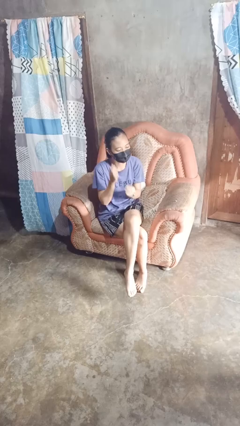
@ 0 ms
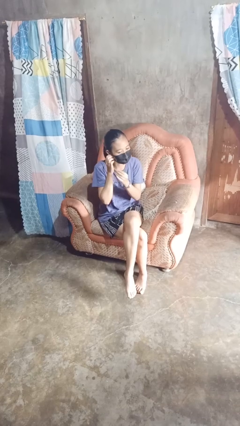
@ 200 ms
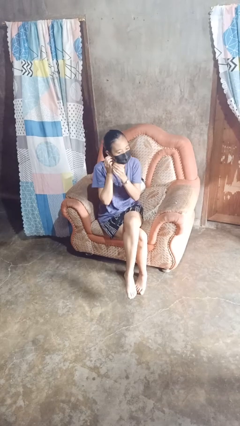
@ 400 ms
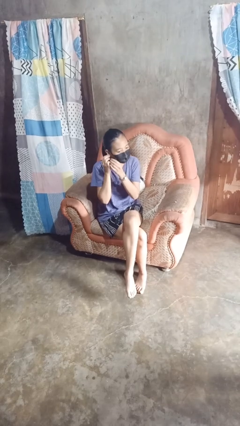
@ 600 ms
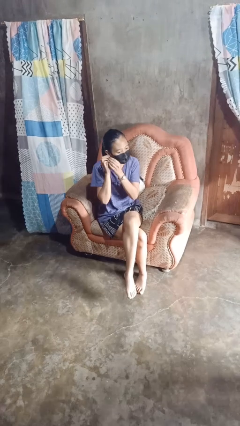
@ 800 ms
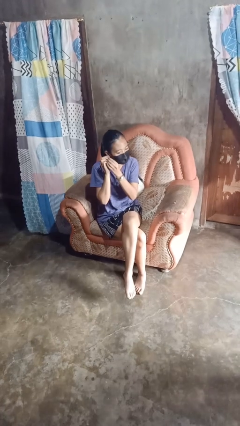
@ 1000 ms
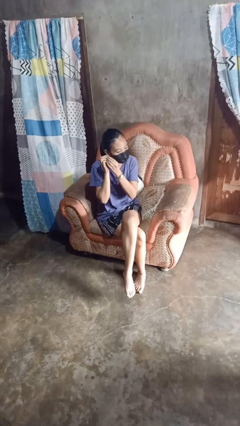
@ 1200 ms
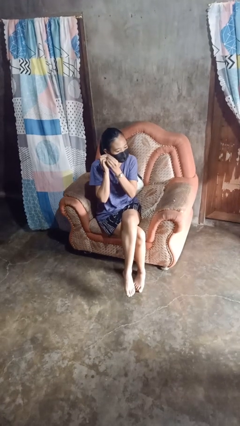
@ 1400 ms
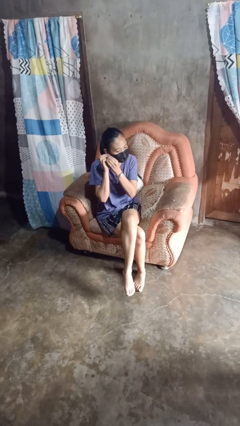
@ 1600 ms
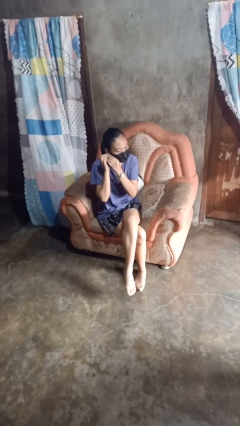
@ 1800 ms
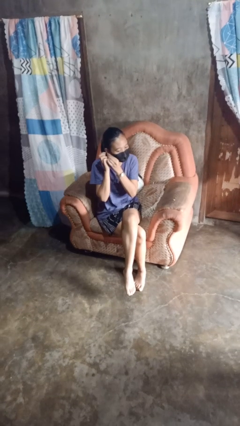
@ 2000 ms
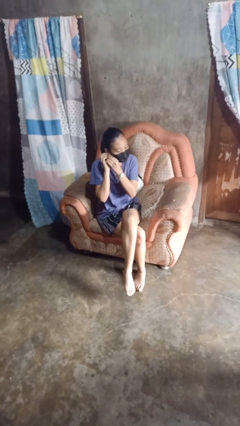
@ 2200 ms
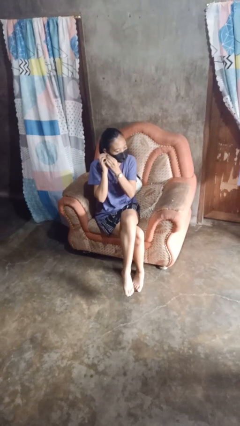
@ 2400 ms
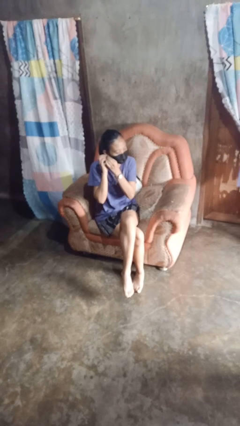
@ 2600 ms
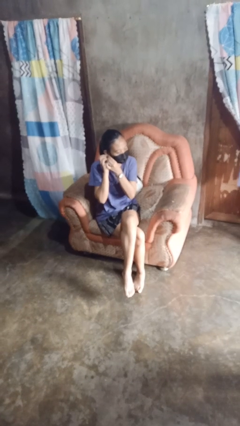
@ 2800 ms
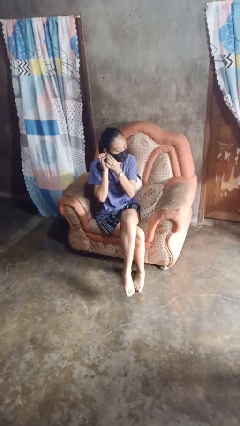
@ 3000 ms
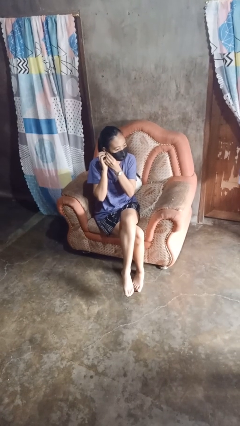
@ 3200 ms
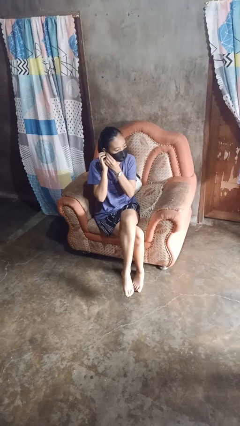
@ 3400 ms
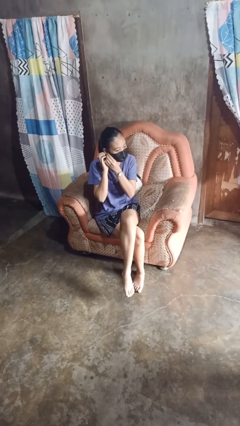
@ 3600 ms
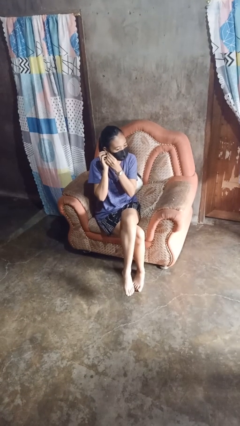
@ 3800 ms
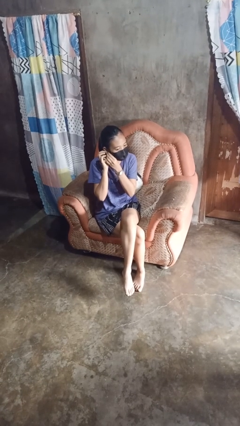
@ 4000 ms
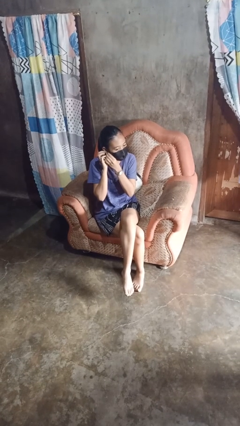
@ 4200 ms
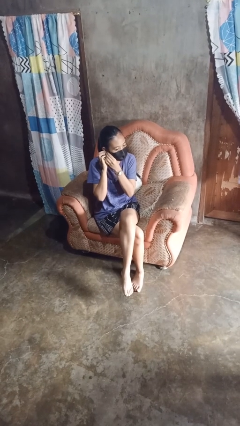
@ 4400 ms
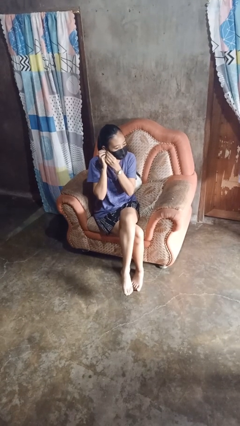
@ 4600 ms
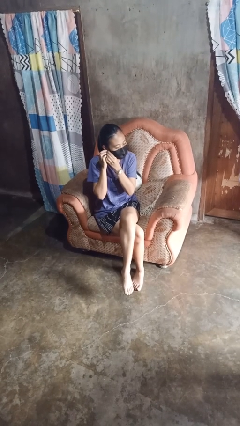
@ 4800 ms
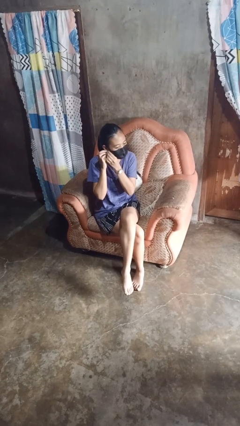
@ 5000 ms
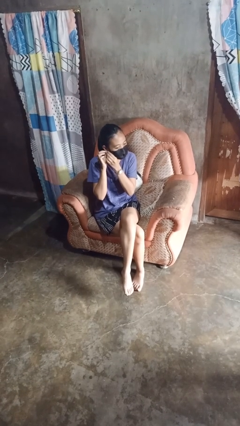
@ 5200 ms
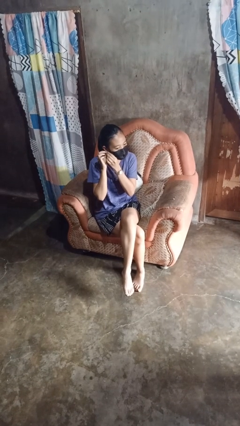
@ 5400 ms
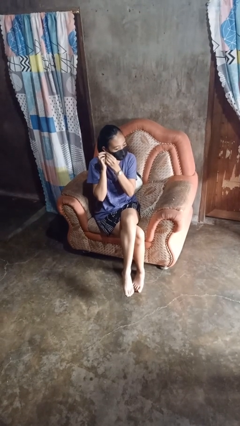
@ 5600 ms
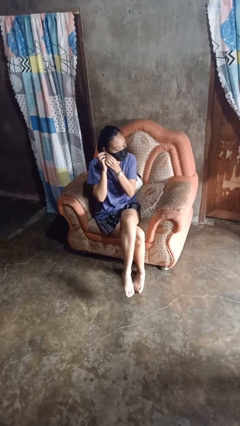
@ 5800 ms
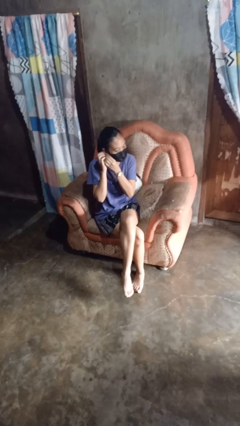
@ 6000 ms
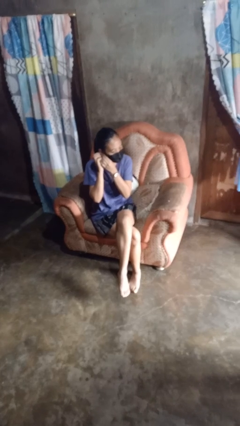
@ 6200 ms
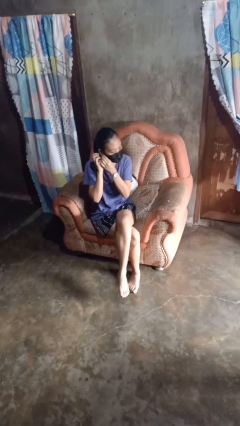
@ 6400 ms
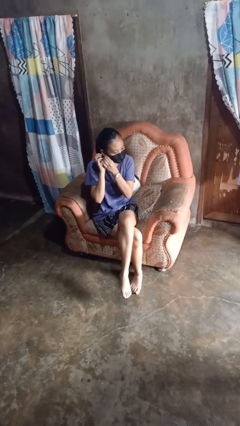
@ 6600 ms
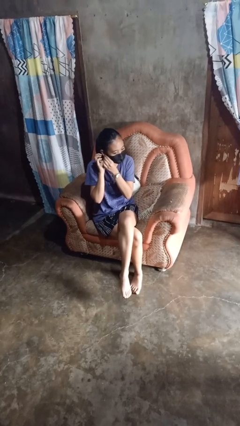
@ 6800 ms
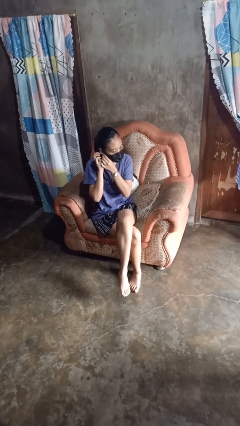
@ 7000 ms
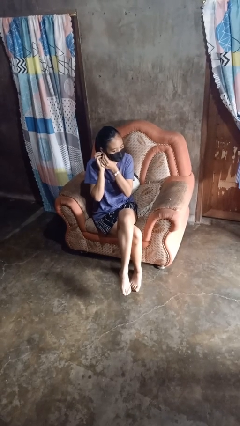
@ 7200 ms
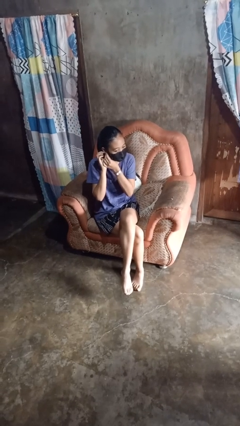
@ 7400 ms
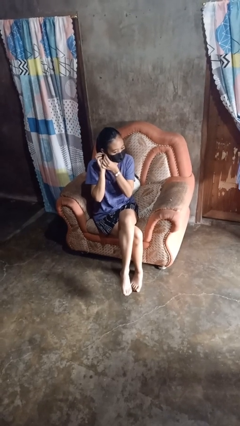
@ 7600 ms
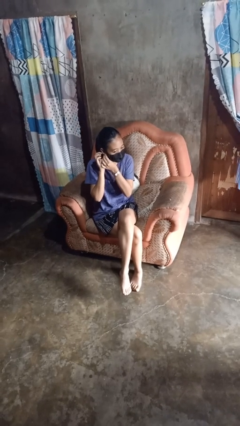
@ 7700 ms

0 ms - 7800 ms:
person puts on earrings

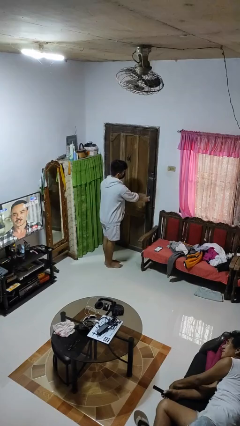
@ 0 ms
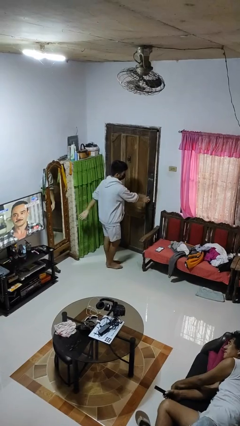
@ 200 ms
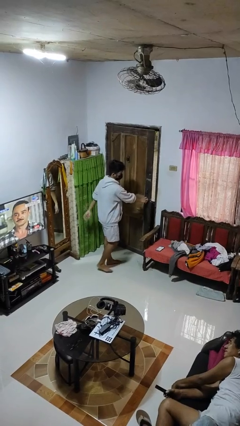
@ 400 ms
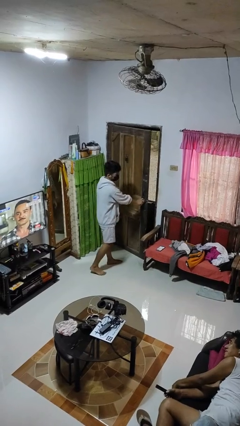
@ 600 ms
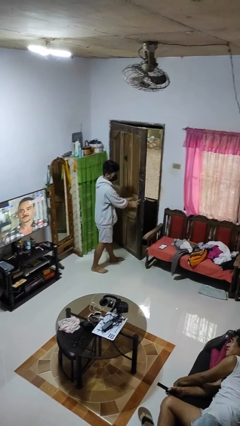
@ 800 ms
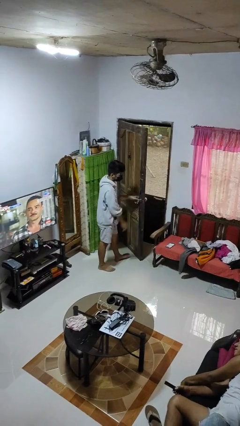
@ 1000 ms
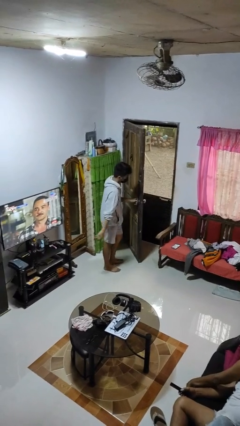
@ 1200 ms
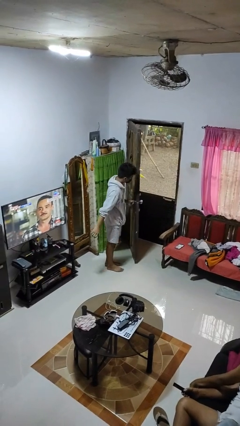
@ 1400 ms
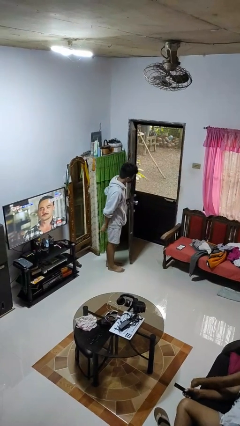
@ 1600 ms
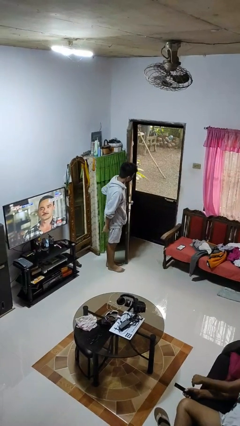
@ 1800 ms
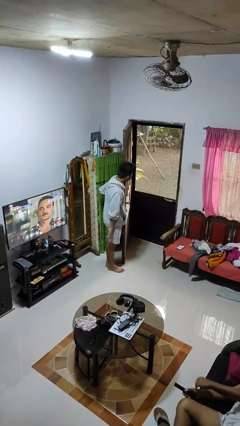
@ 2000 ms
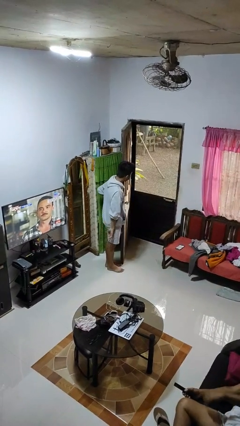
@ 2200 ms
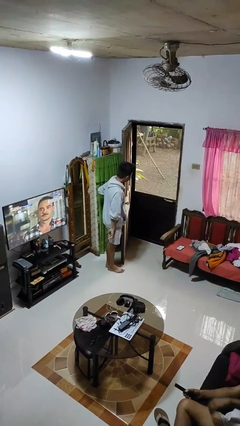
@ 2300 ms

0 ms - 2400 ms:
person opens facility door

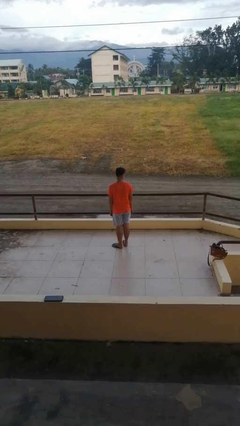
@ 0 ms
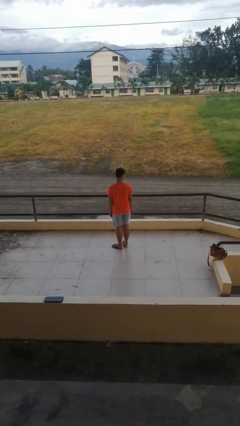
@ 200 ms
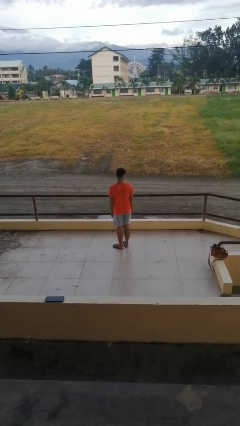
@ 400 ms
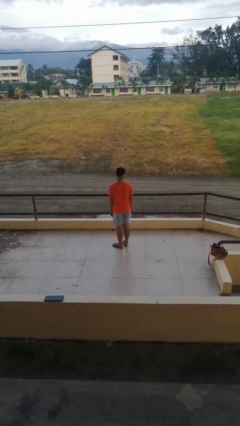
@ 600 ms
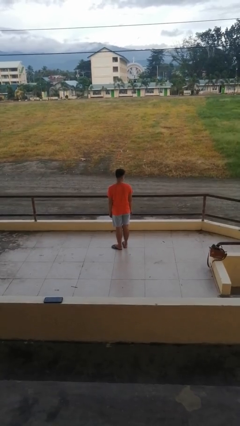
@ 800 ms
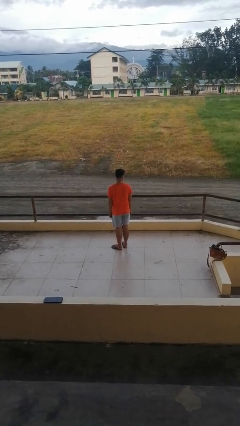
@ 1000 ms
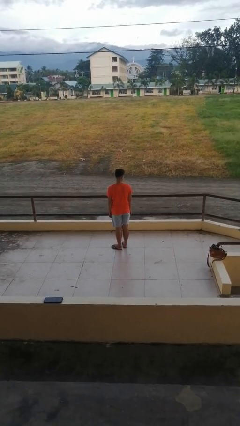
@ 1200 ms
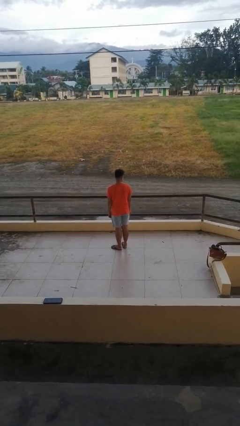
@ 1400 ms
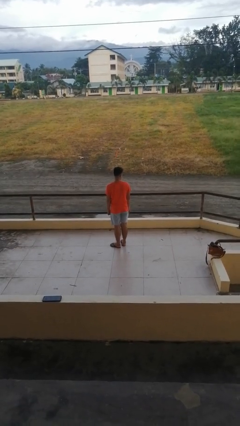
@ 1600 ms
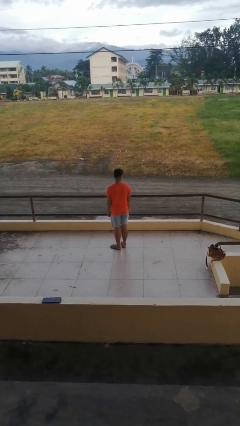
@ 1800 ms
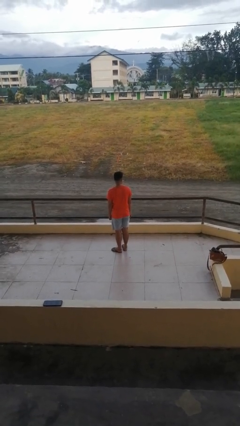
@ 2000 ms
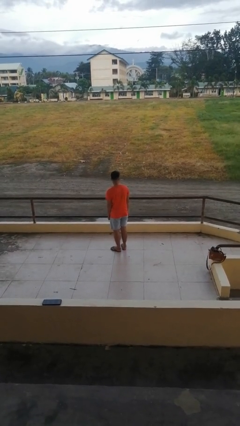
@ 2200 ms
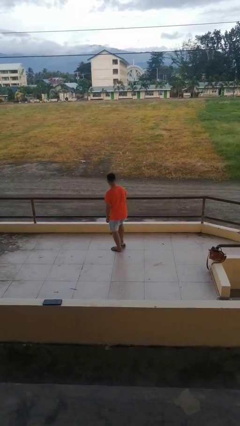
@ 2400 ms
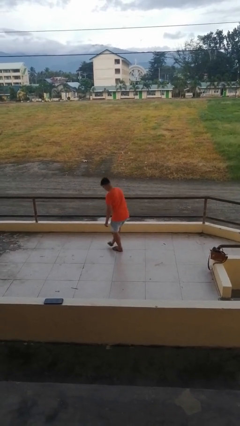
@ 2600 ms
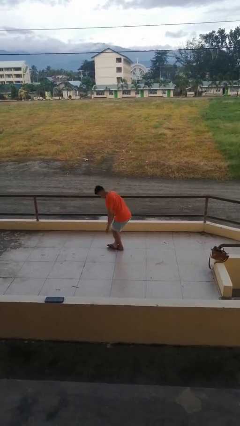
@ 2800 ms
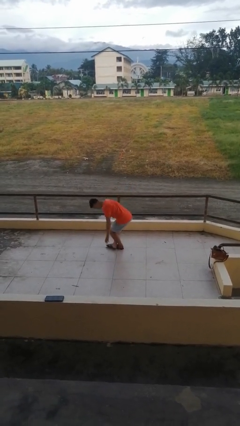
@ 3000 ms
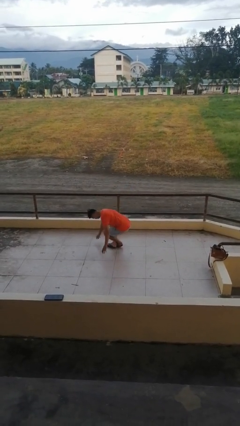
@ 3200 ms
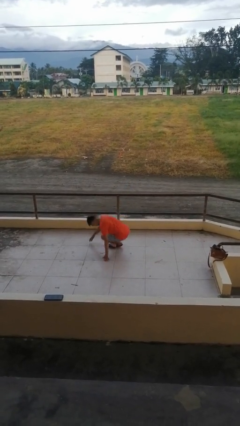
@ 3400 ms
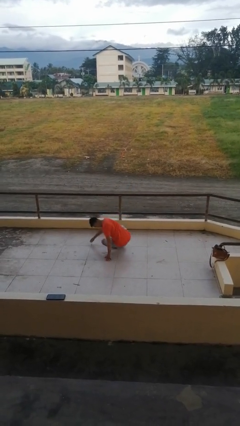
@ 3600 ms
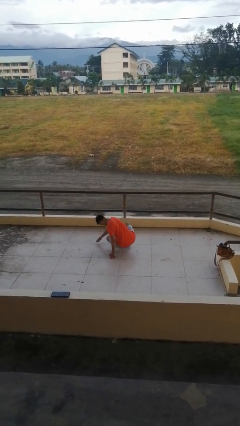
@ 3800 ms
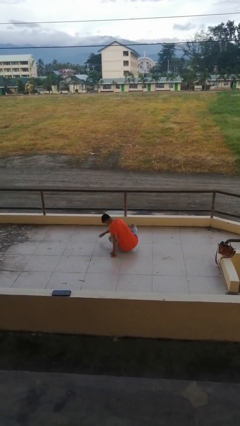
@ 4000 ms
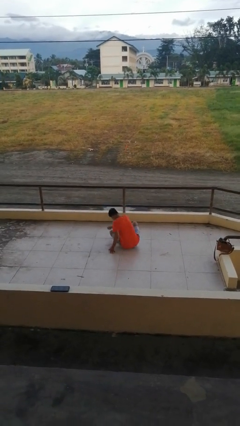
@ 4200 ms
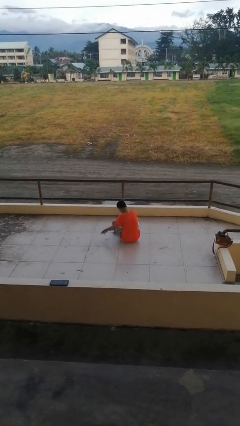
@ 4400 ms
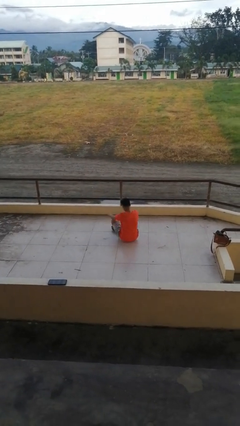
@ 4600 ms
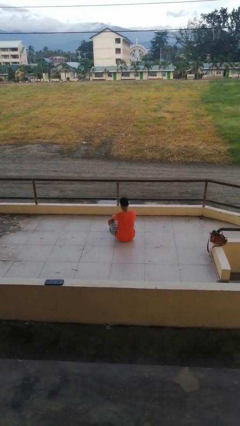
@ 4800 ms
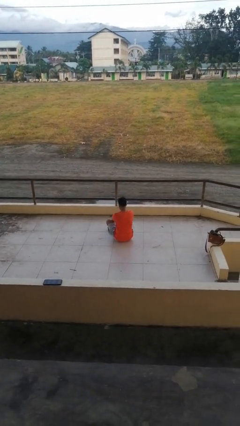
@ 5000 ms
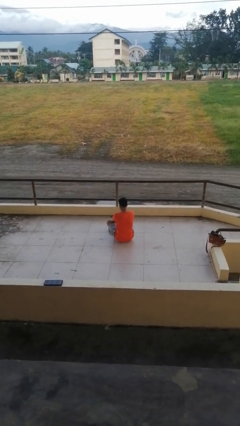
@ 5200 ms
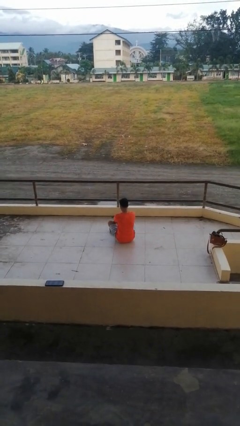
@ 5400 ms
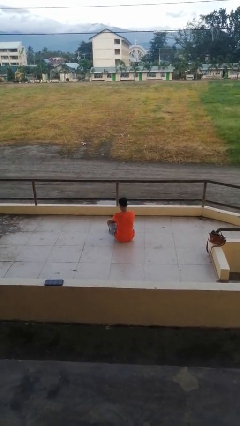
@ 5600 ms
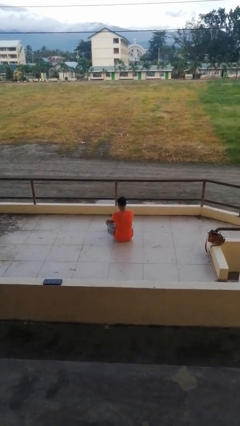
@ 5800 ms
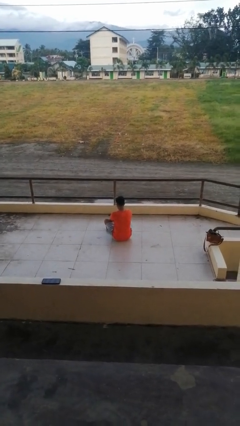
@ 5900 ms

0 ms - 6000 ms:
person sits crisscross

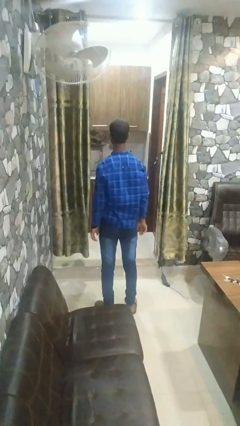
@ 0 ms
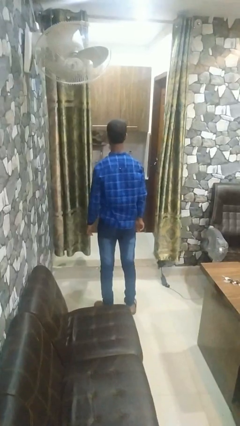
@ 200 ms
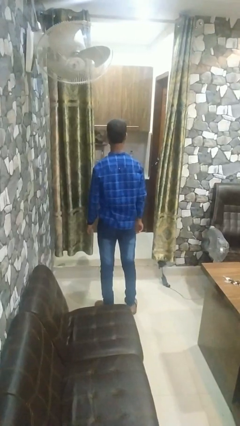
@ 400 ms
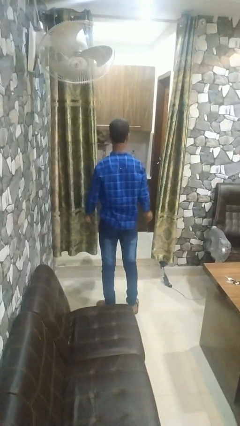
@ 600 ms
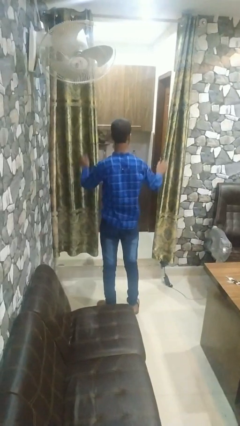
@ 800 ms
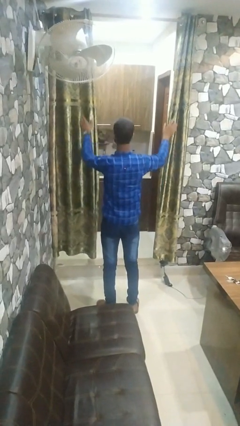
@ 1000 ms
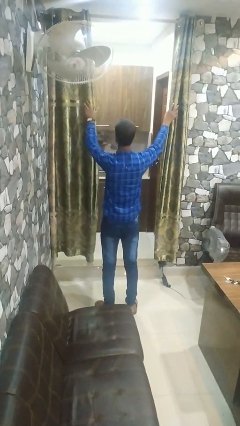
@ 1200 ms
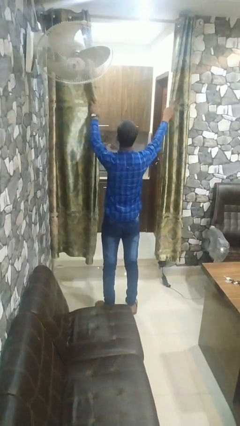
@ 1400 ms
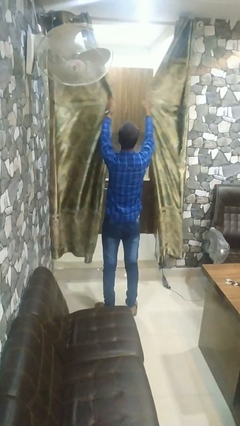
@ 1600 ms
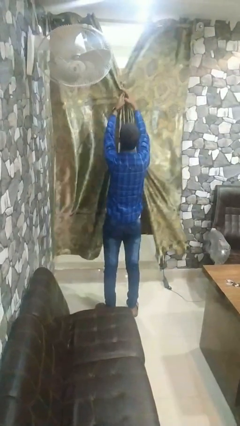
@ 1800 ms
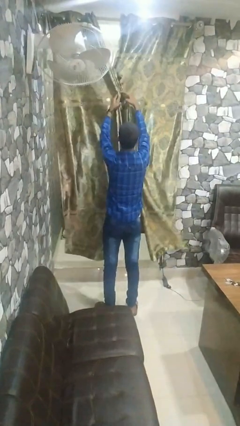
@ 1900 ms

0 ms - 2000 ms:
person closes curtains
